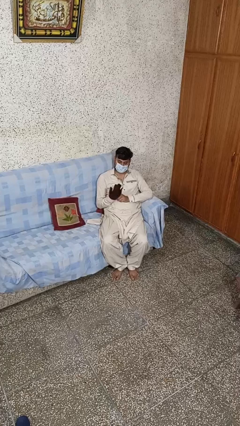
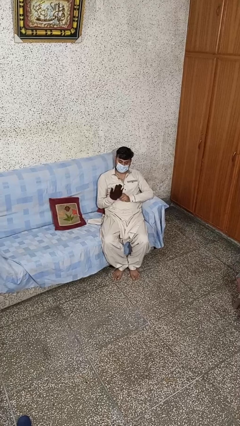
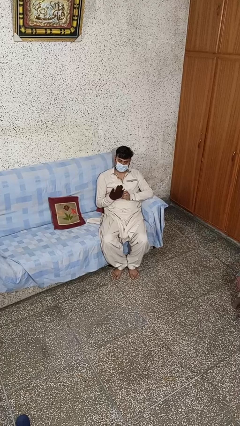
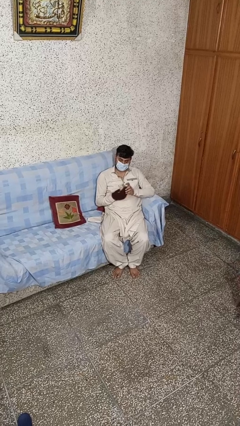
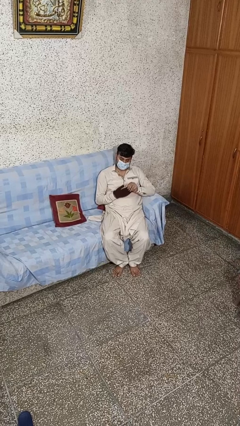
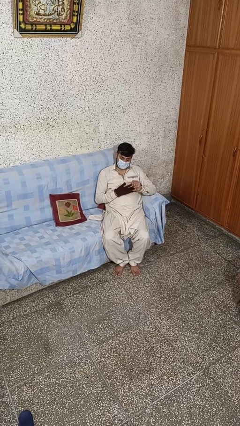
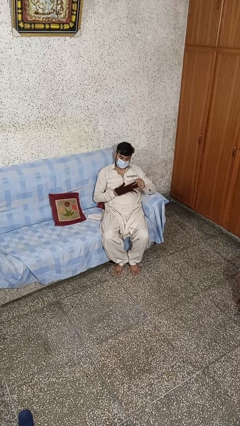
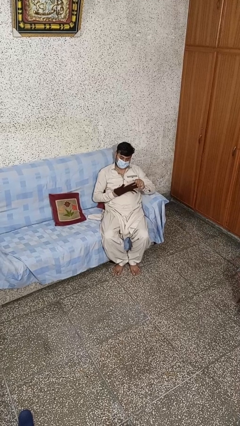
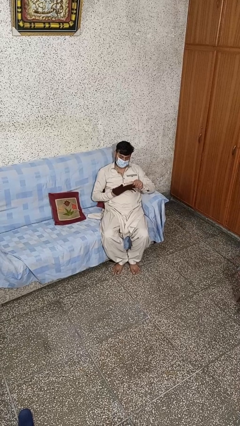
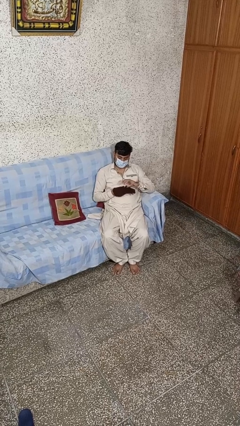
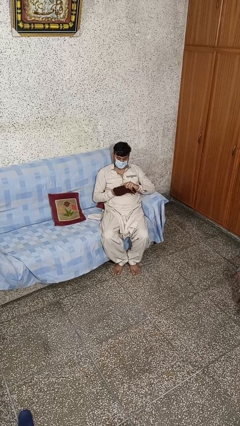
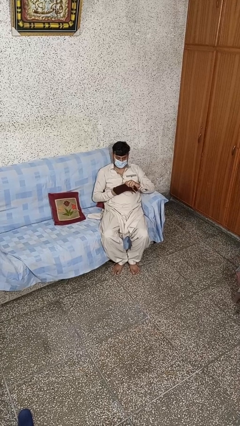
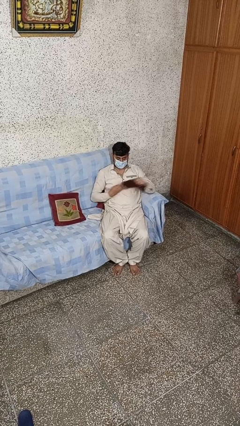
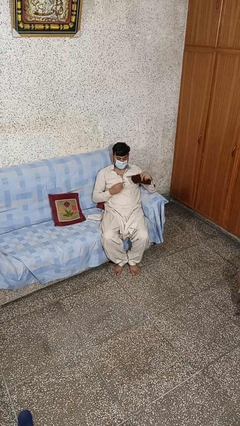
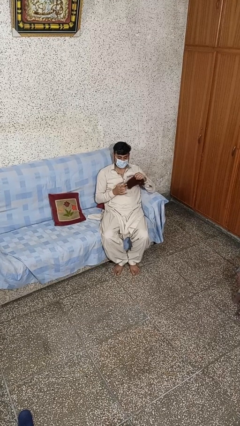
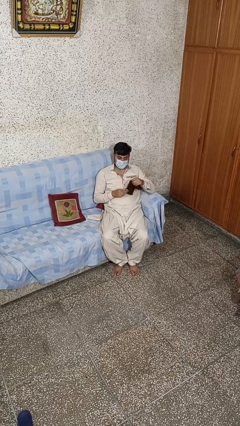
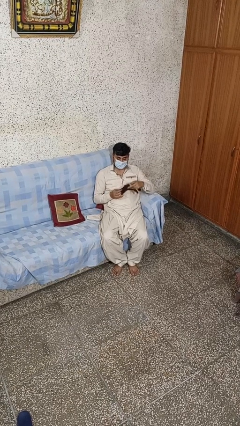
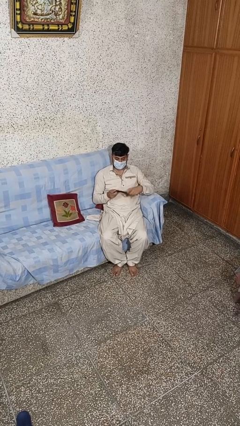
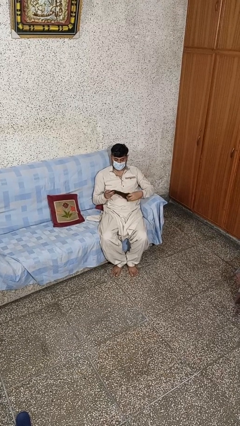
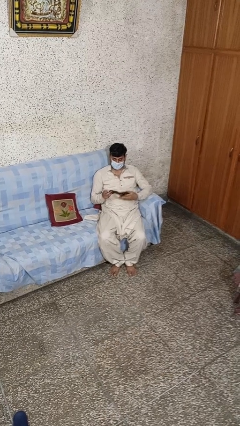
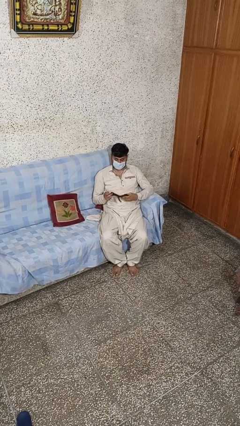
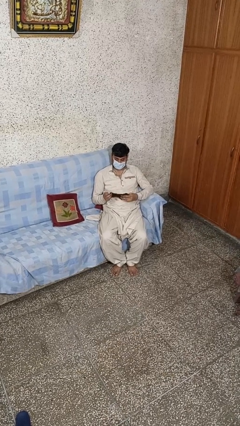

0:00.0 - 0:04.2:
person takes off gloves

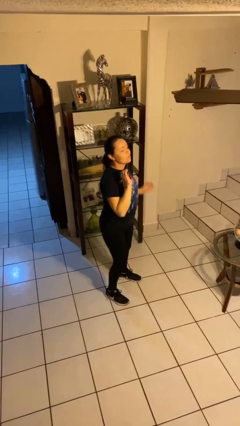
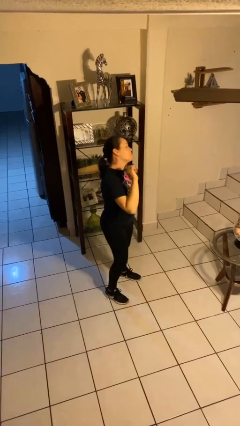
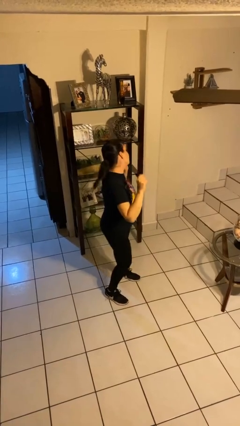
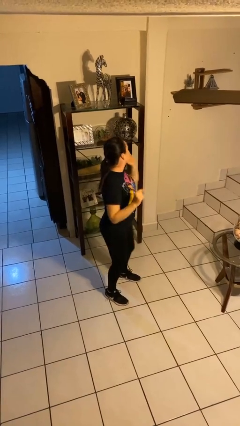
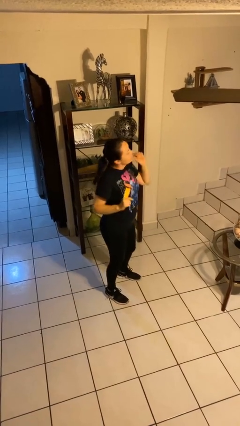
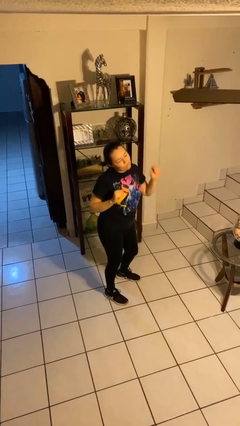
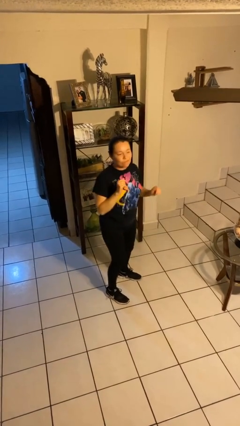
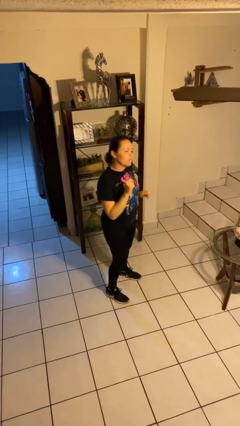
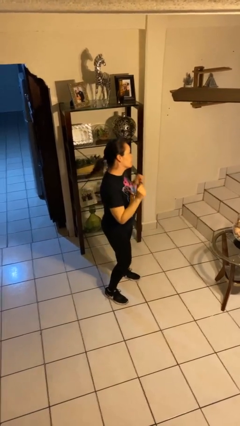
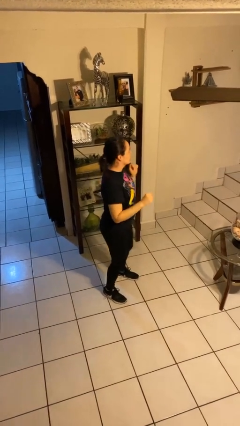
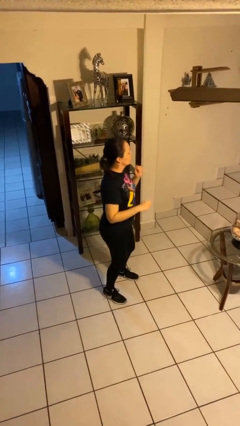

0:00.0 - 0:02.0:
person dances in place

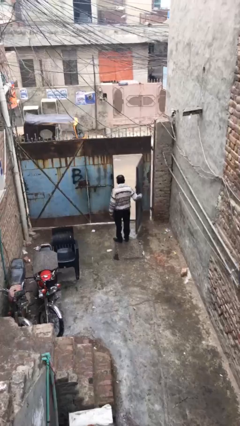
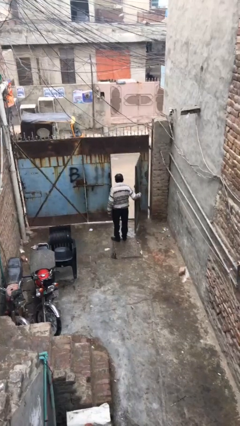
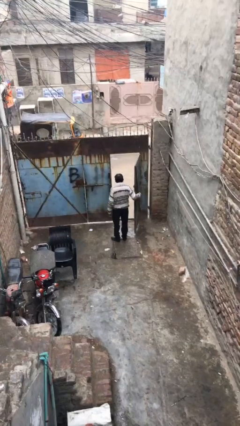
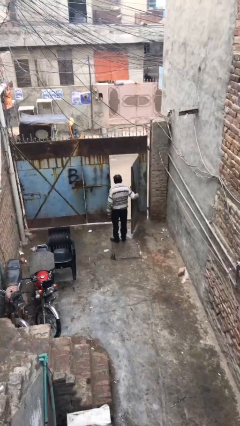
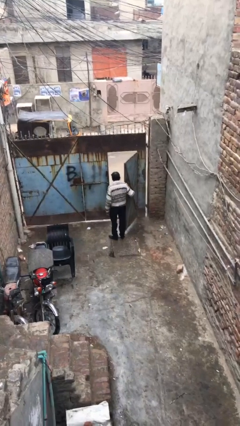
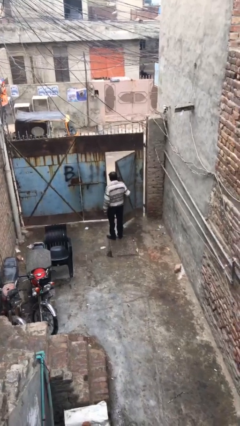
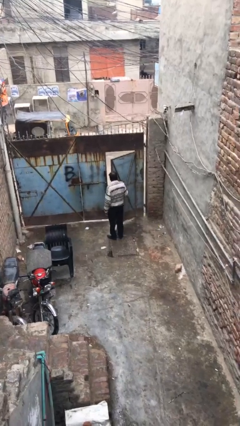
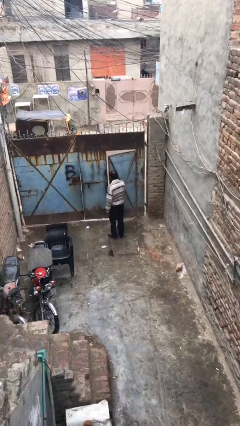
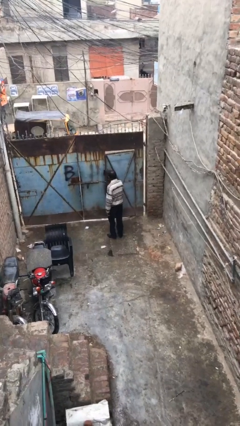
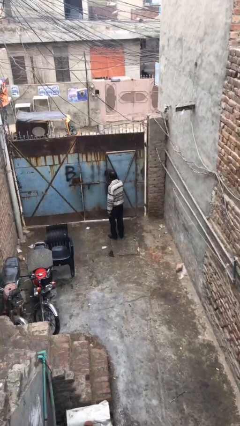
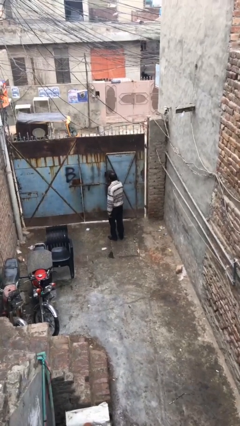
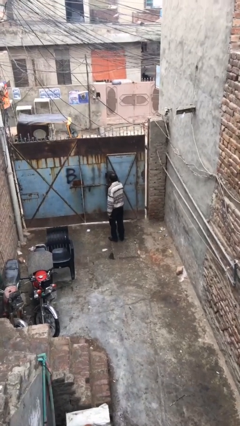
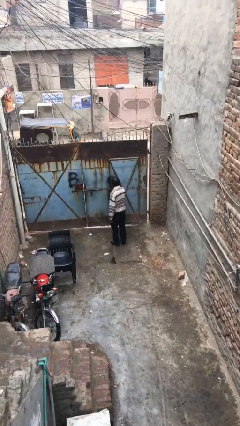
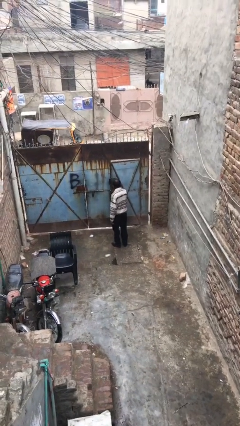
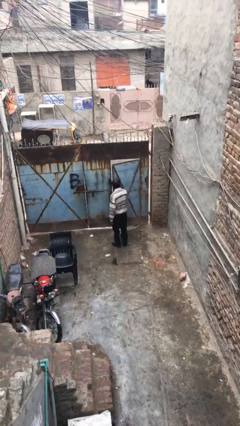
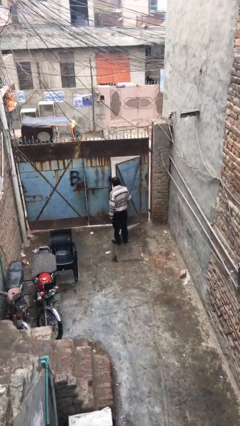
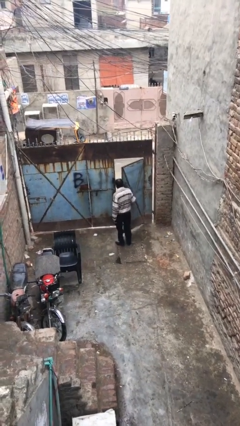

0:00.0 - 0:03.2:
person closes facility door

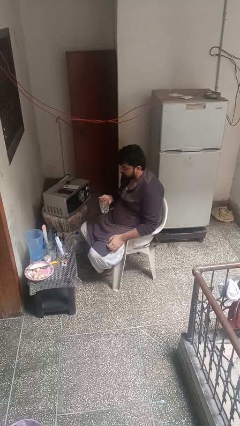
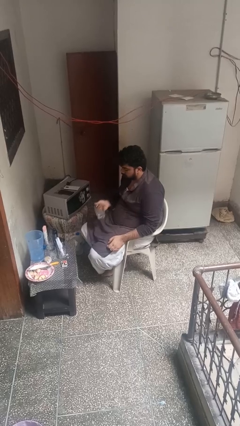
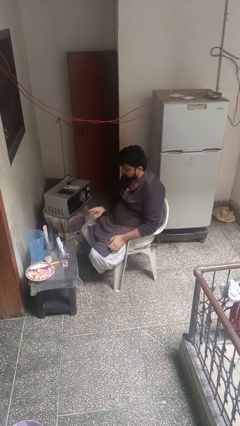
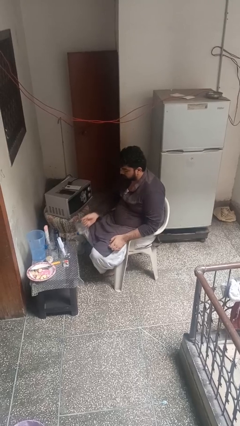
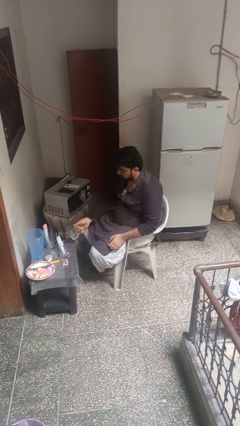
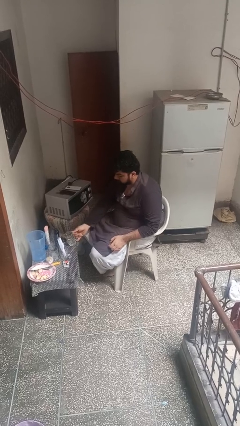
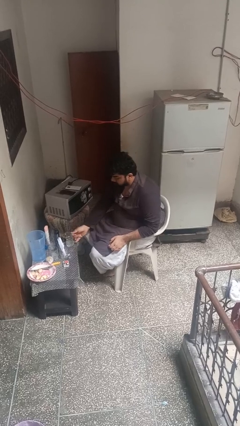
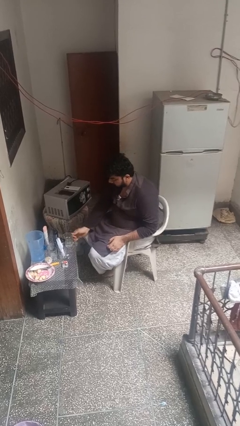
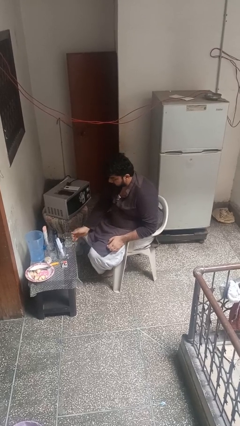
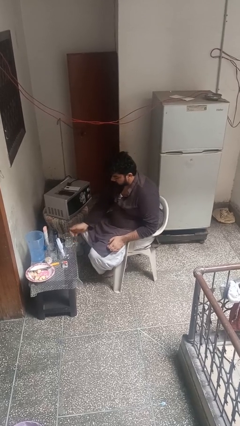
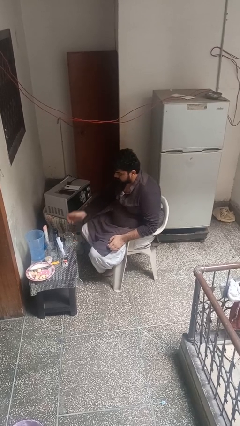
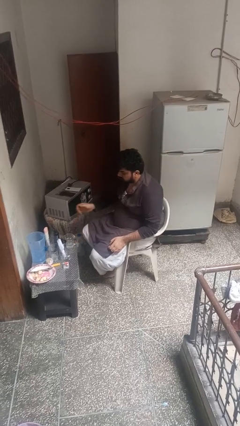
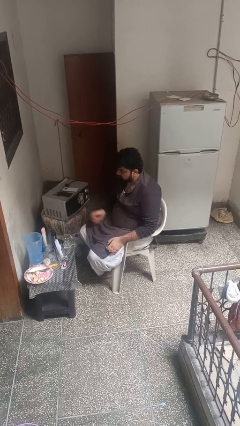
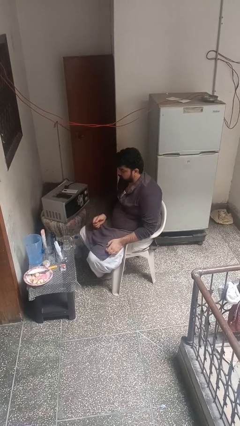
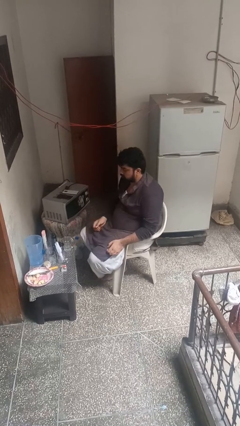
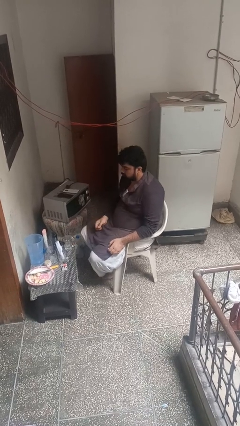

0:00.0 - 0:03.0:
person puts down object on table

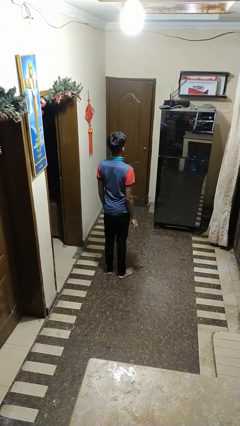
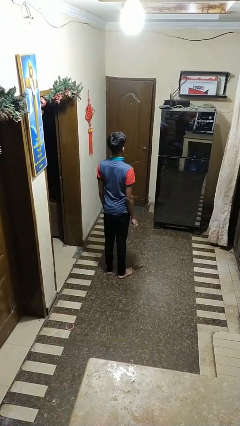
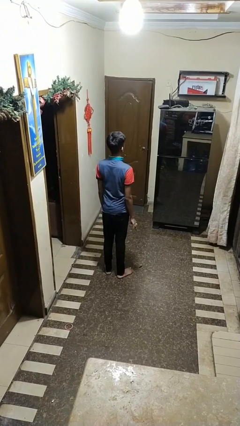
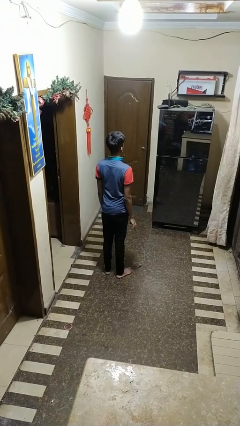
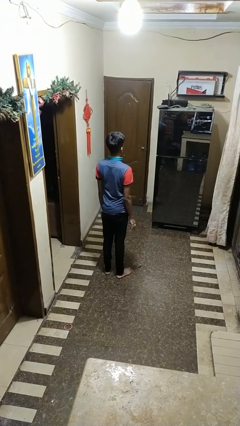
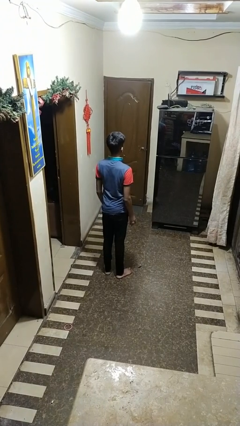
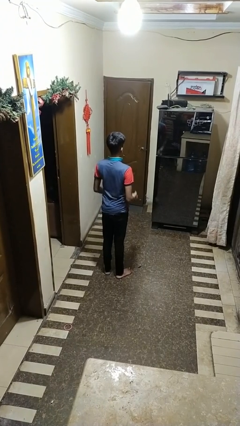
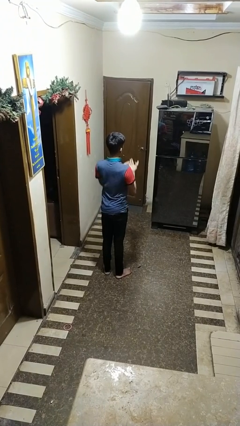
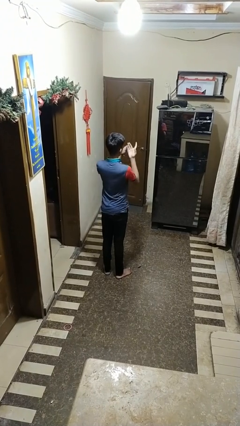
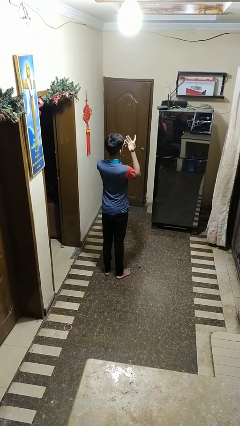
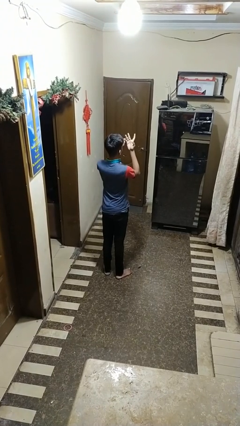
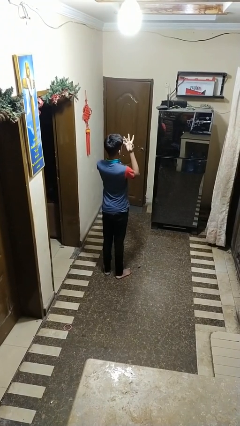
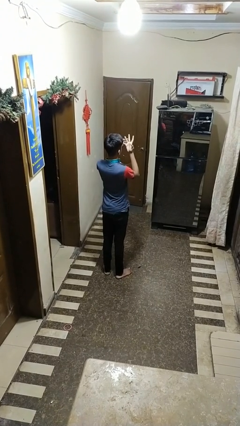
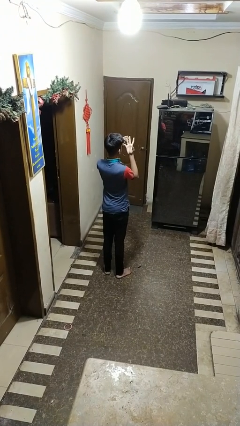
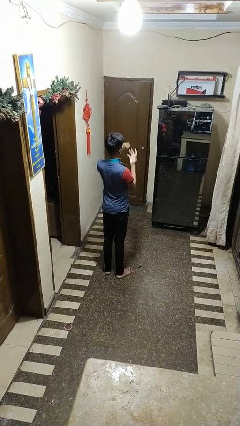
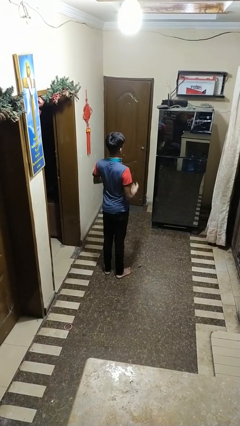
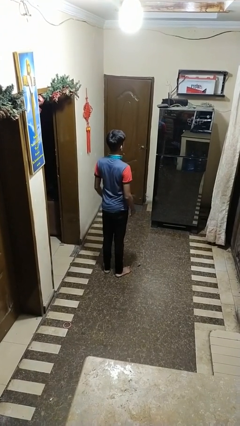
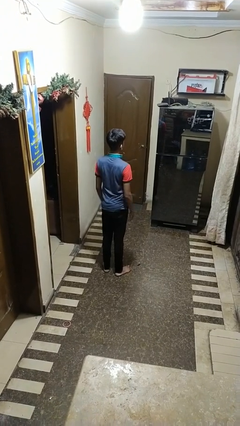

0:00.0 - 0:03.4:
person takes off ring

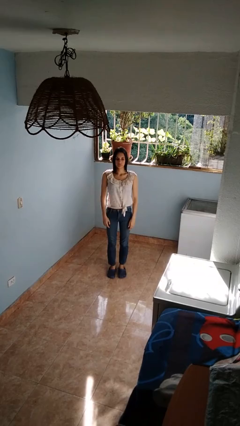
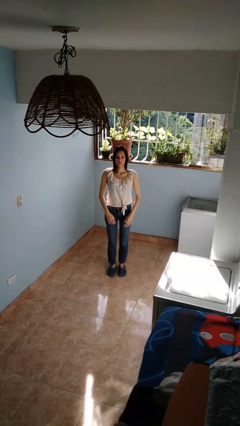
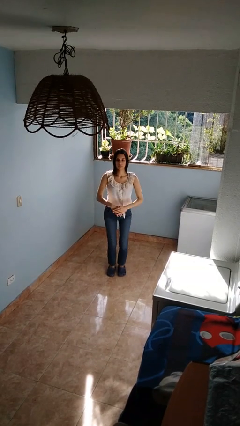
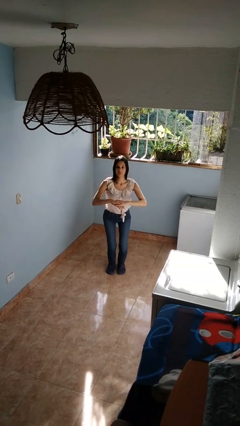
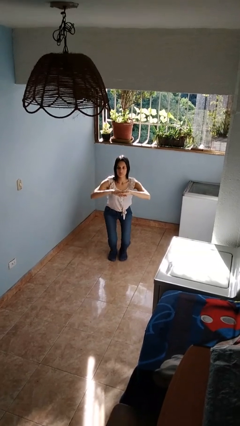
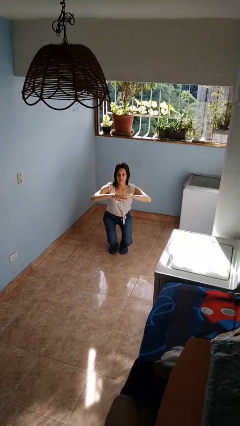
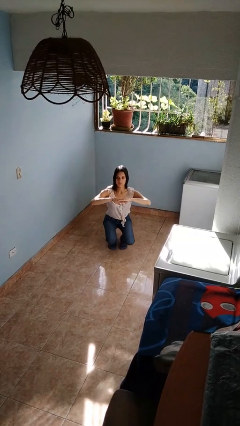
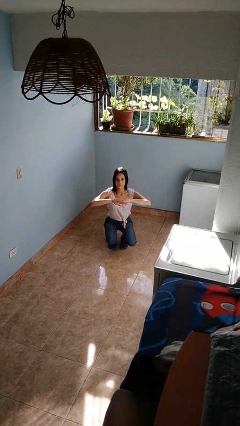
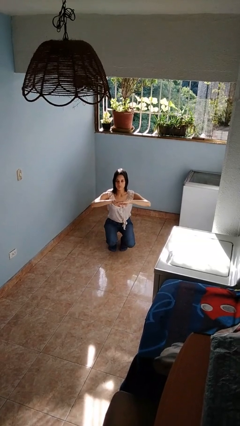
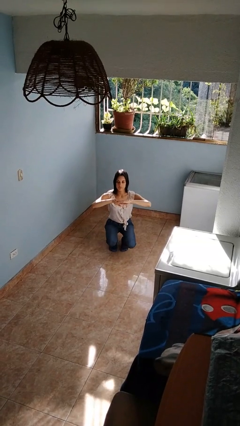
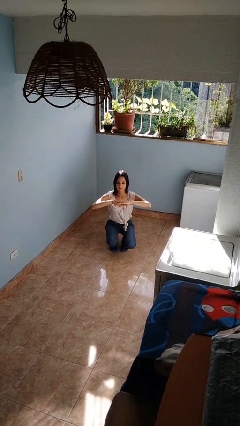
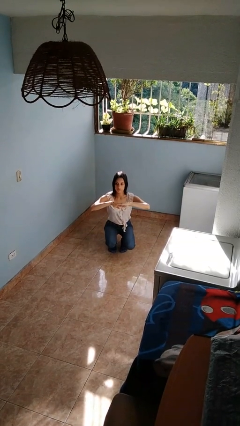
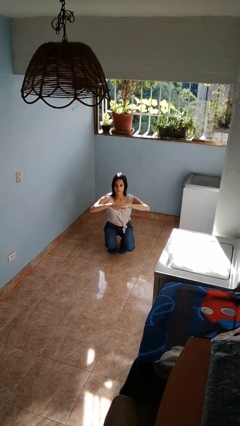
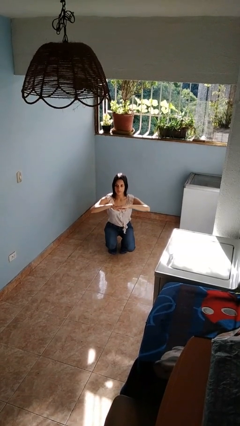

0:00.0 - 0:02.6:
person squats
